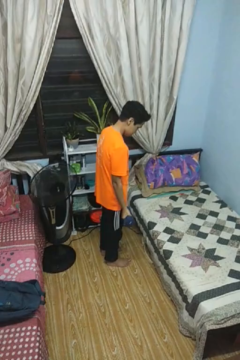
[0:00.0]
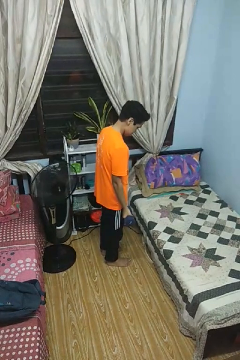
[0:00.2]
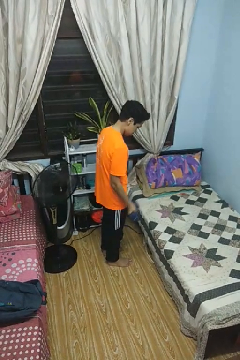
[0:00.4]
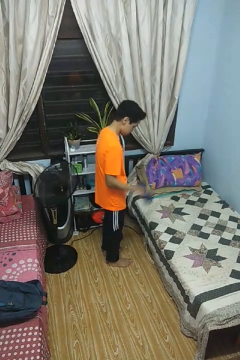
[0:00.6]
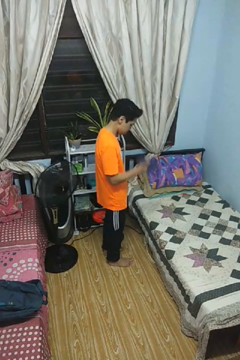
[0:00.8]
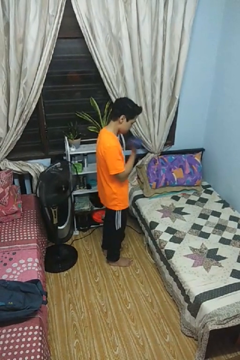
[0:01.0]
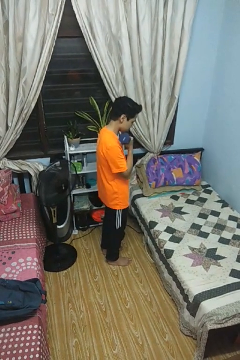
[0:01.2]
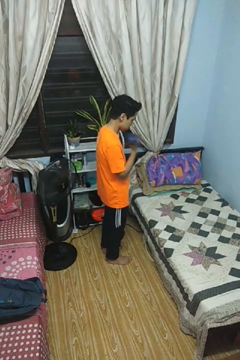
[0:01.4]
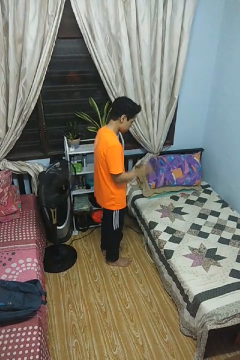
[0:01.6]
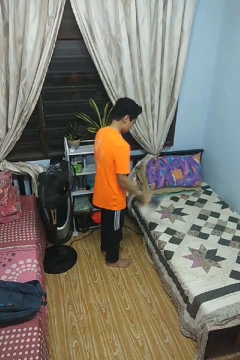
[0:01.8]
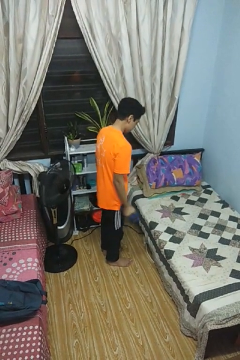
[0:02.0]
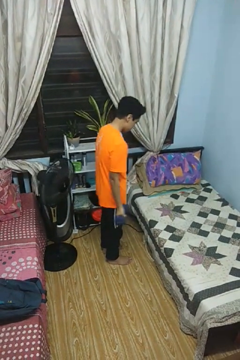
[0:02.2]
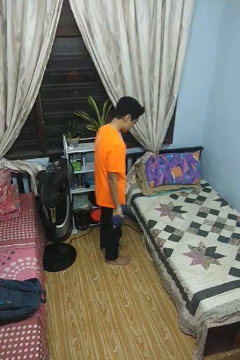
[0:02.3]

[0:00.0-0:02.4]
person lifts dumbbells

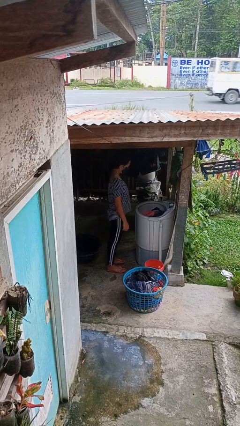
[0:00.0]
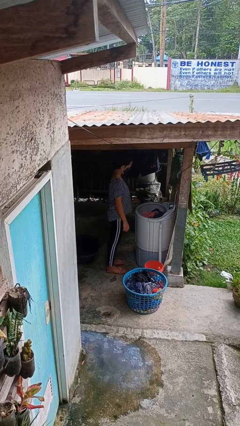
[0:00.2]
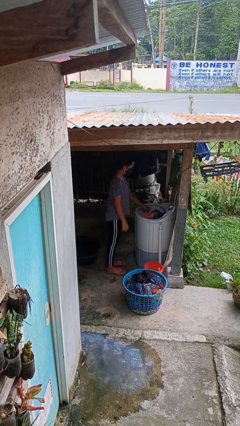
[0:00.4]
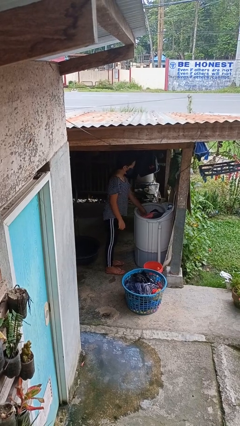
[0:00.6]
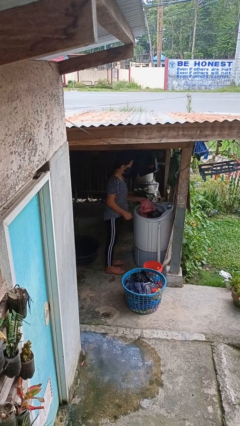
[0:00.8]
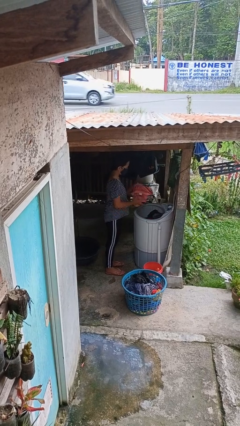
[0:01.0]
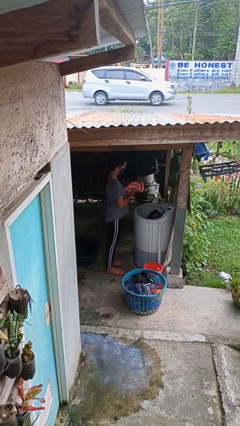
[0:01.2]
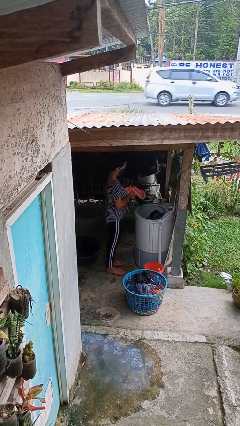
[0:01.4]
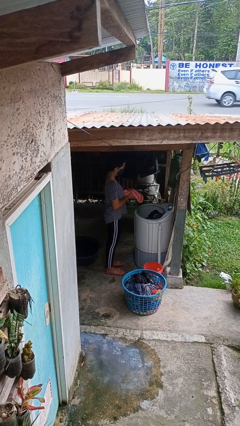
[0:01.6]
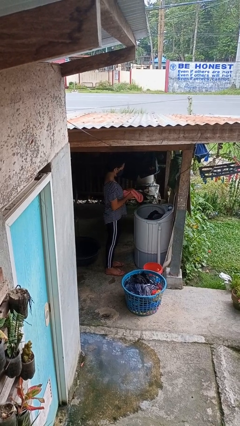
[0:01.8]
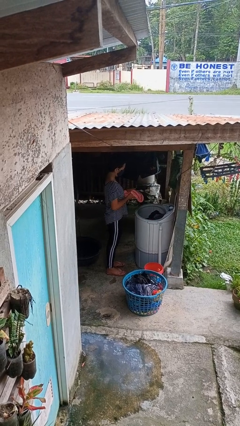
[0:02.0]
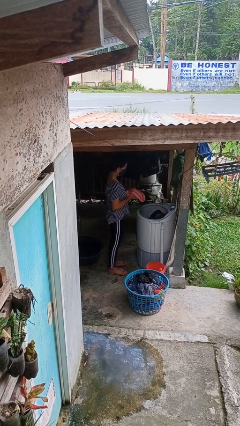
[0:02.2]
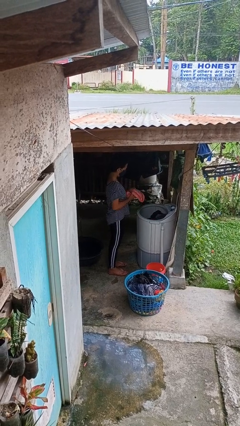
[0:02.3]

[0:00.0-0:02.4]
person unloads clotheswasher

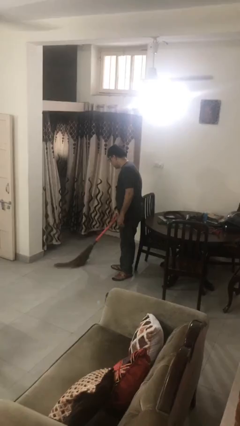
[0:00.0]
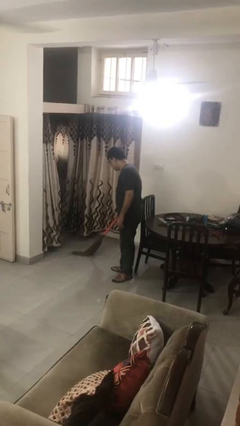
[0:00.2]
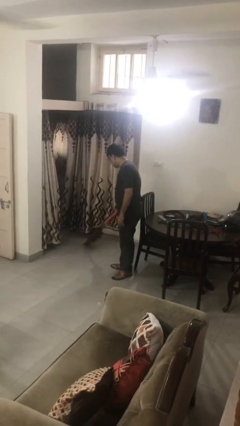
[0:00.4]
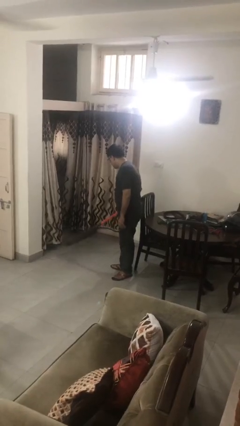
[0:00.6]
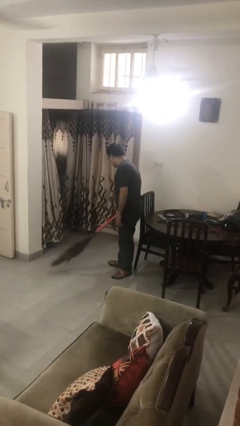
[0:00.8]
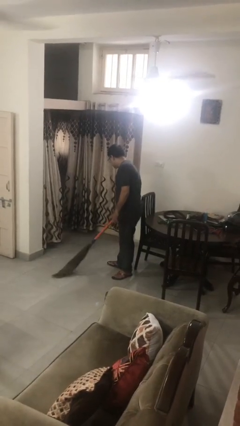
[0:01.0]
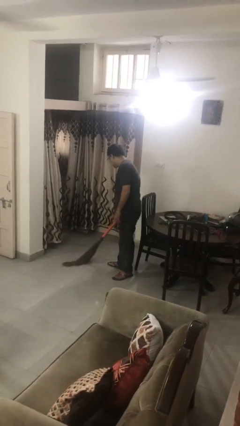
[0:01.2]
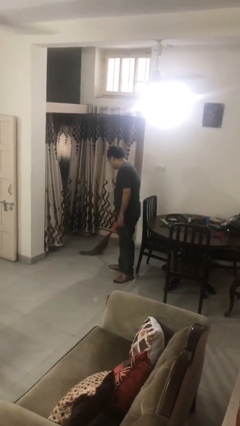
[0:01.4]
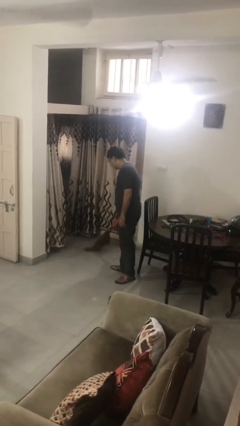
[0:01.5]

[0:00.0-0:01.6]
person sweeps floor

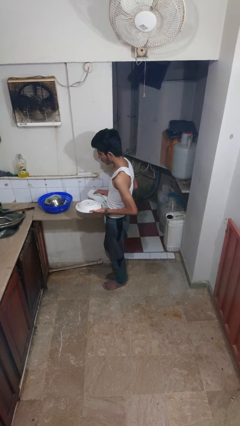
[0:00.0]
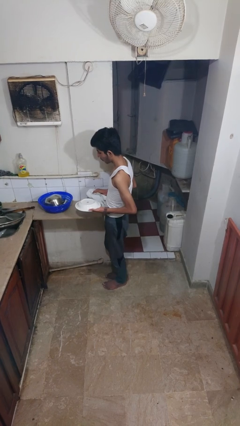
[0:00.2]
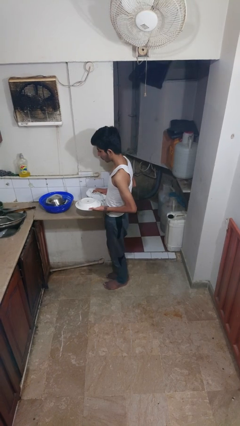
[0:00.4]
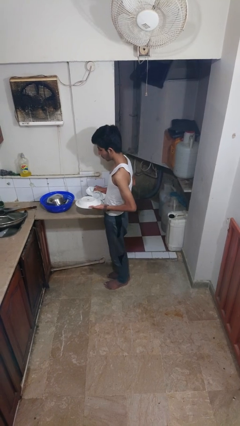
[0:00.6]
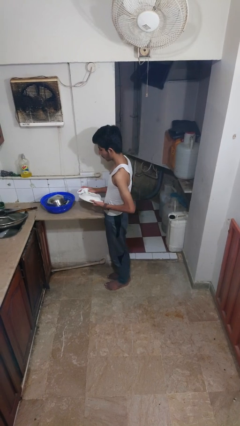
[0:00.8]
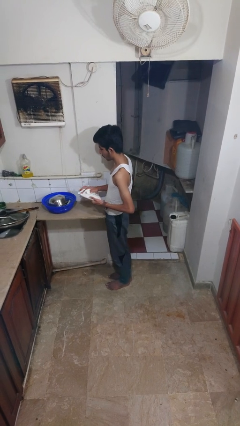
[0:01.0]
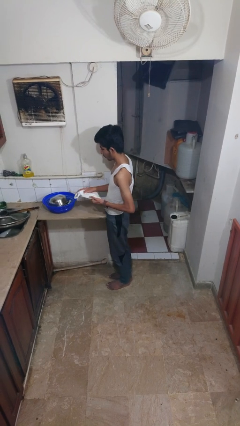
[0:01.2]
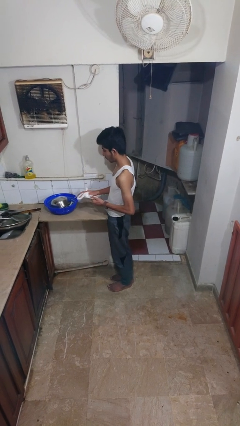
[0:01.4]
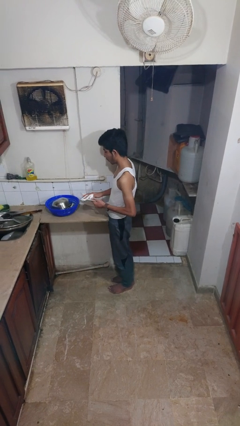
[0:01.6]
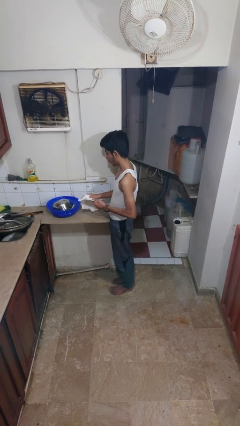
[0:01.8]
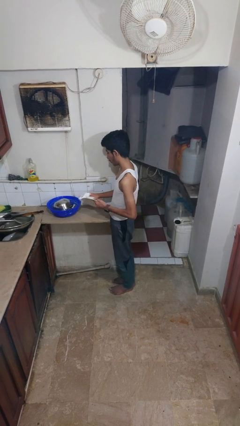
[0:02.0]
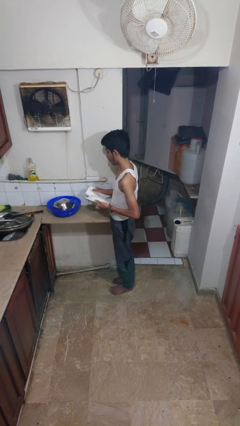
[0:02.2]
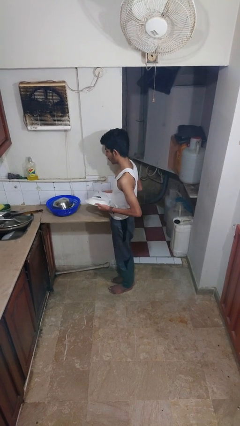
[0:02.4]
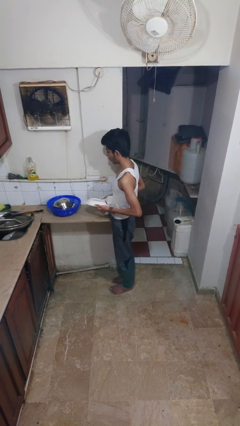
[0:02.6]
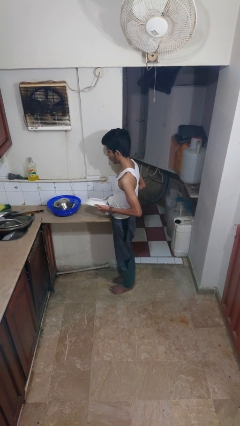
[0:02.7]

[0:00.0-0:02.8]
person dries dish

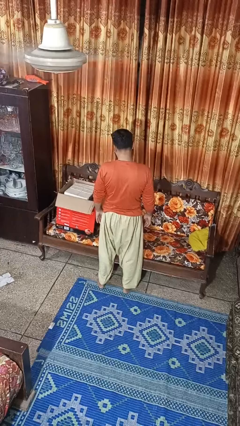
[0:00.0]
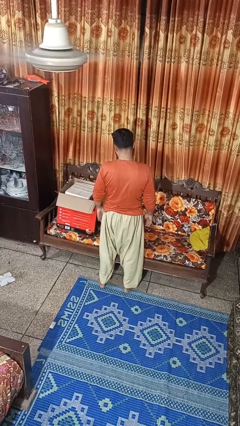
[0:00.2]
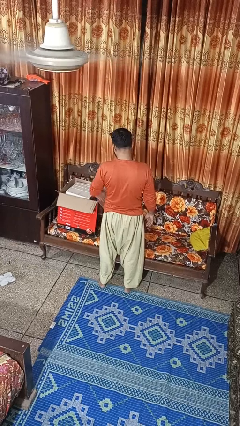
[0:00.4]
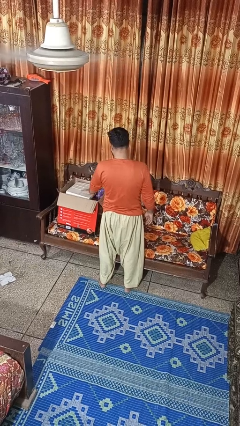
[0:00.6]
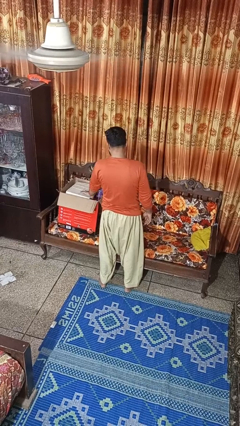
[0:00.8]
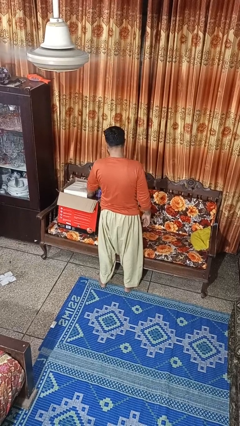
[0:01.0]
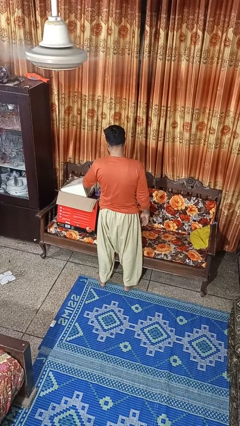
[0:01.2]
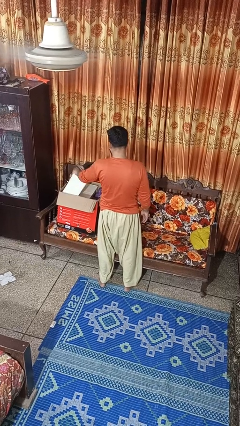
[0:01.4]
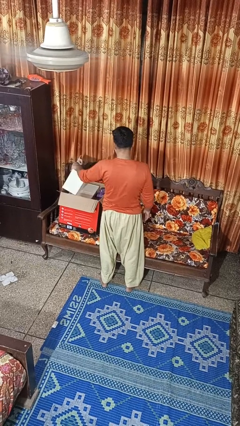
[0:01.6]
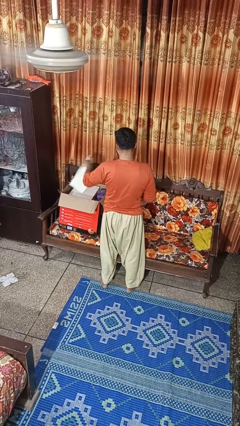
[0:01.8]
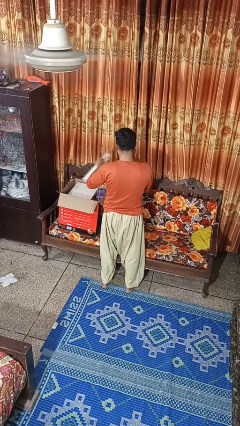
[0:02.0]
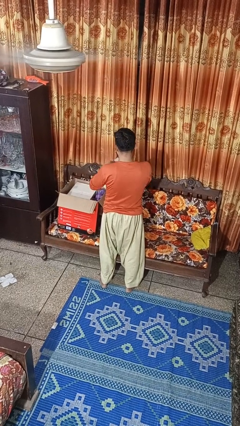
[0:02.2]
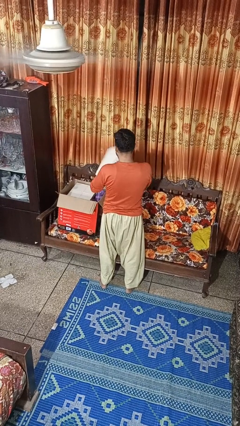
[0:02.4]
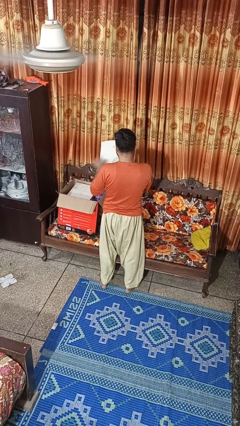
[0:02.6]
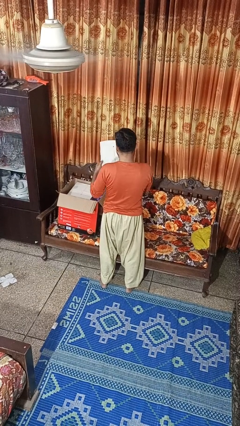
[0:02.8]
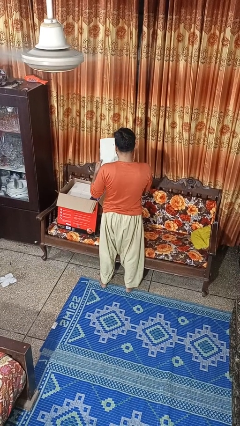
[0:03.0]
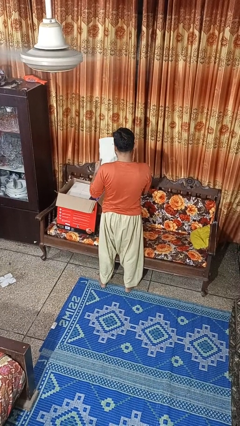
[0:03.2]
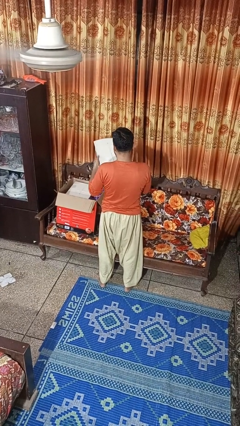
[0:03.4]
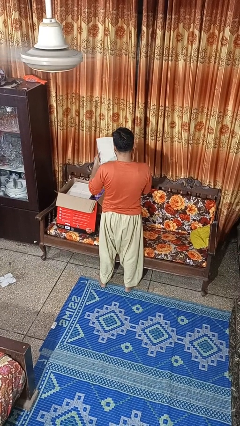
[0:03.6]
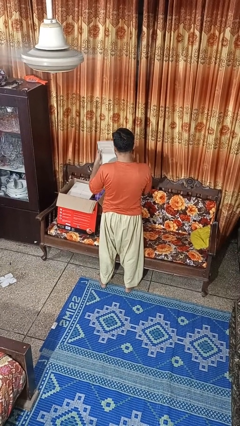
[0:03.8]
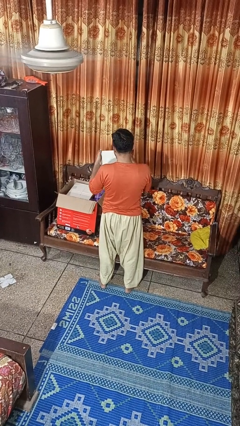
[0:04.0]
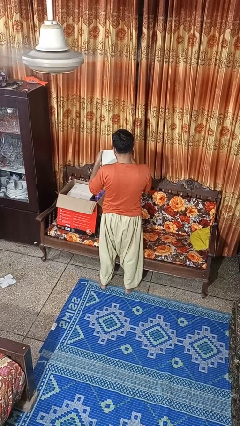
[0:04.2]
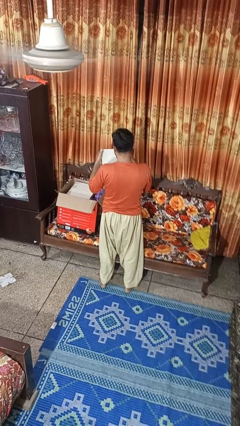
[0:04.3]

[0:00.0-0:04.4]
person takes object from box

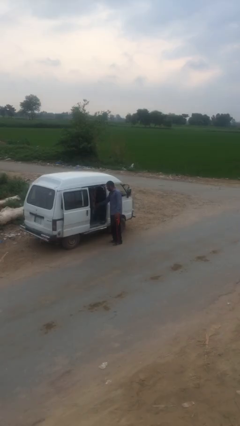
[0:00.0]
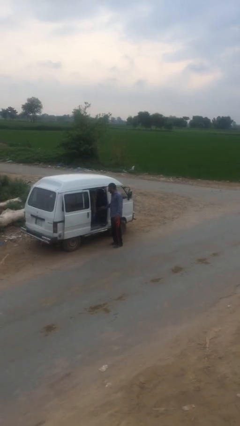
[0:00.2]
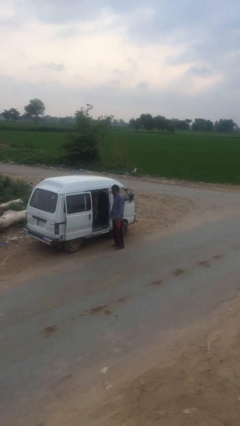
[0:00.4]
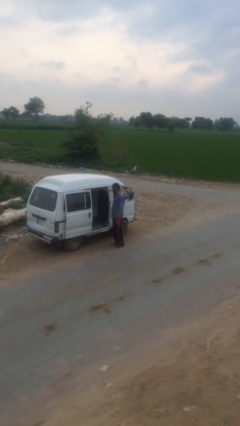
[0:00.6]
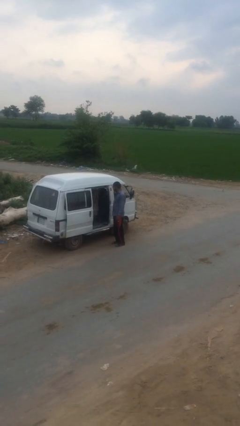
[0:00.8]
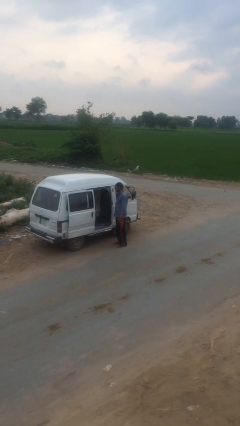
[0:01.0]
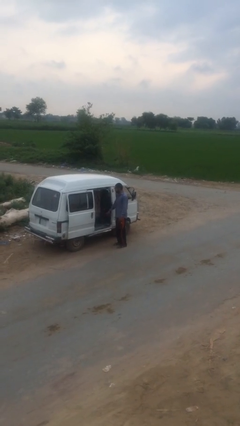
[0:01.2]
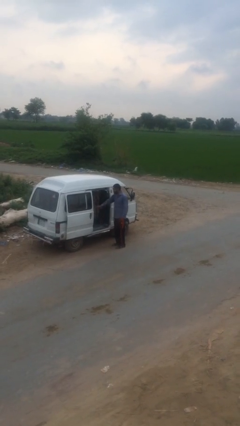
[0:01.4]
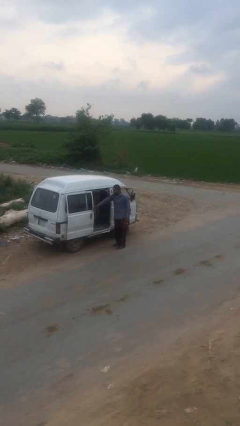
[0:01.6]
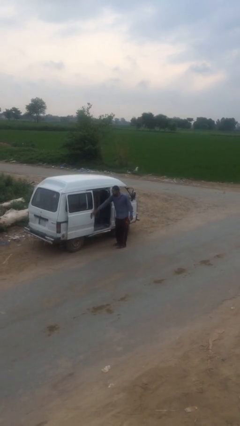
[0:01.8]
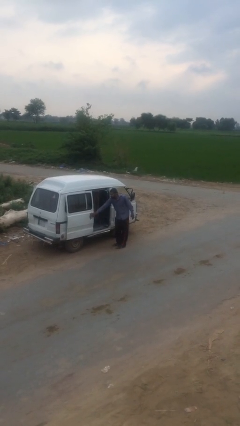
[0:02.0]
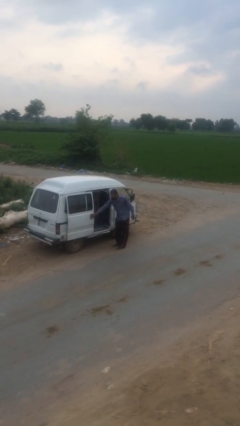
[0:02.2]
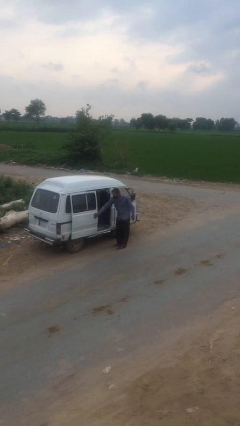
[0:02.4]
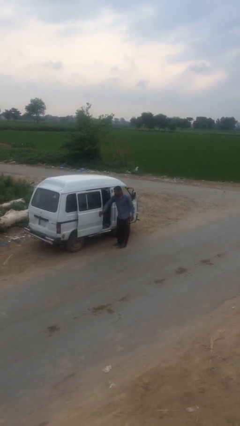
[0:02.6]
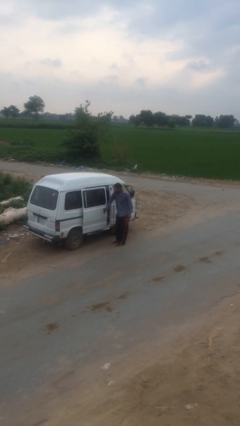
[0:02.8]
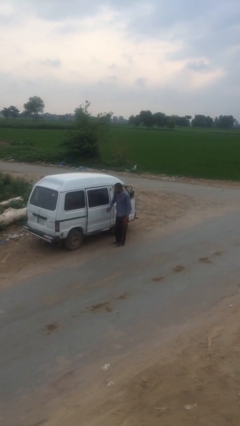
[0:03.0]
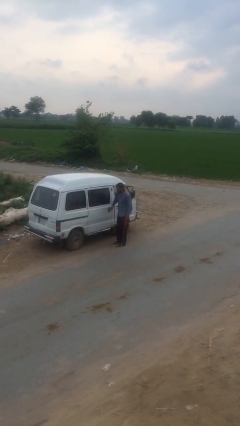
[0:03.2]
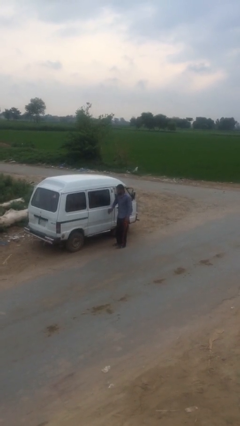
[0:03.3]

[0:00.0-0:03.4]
person closes car door
